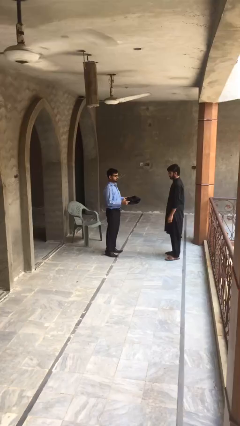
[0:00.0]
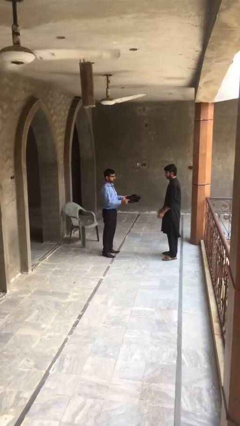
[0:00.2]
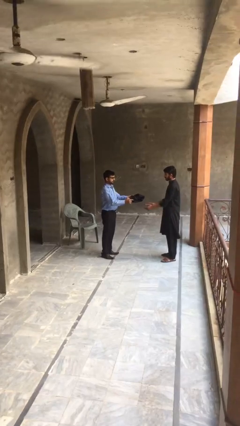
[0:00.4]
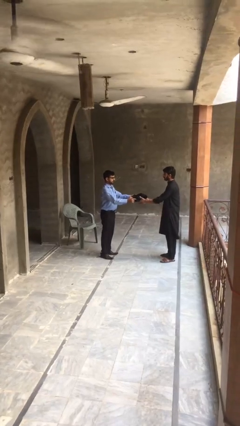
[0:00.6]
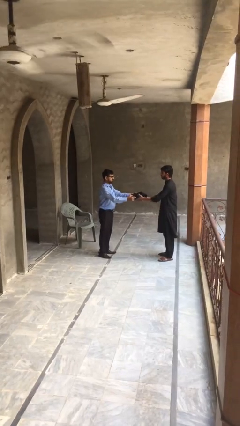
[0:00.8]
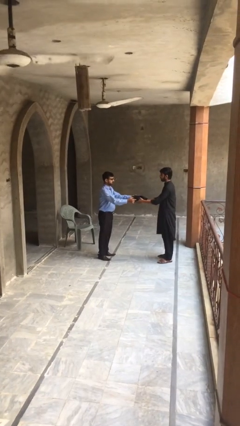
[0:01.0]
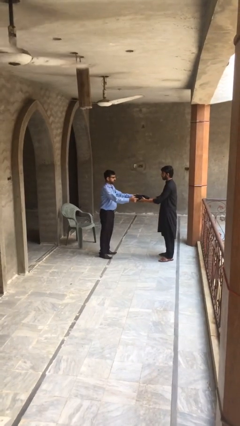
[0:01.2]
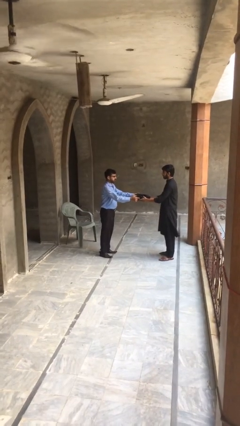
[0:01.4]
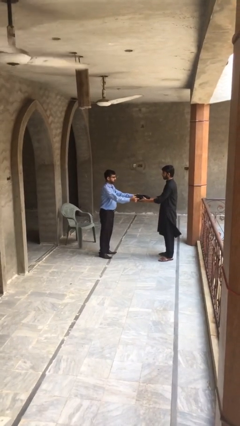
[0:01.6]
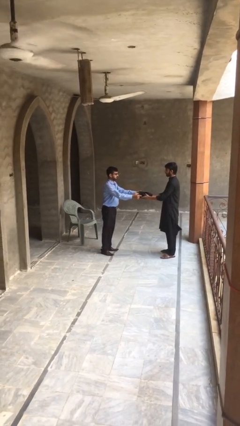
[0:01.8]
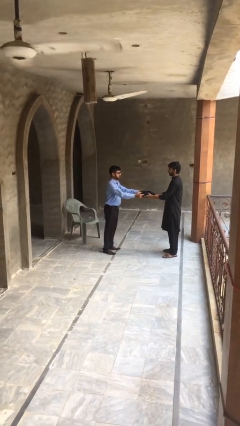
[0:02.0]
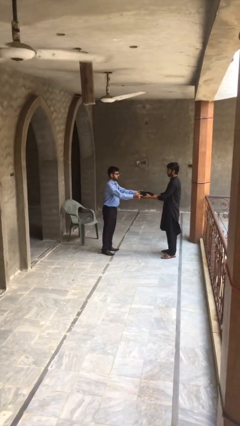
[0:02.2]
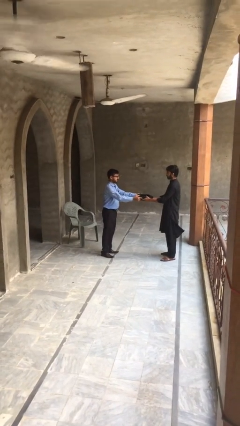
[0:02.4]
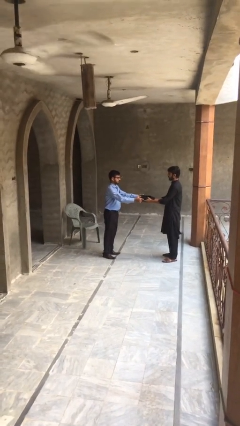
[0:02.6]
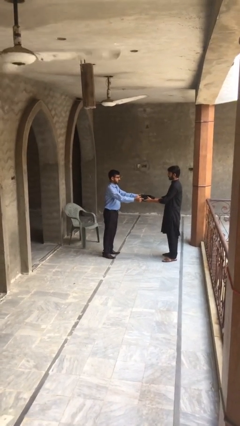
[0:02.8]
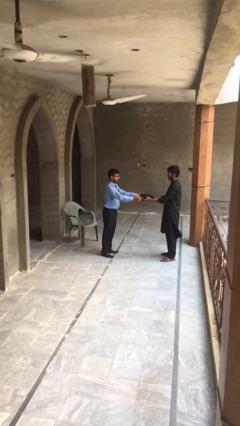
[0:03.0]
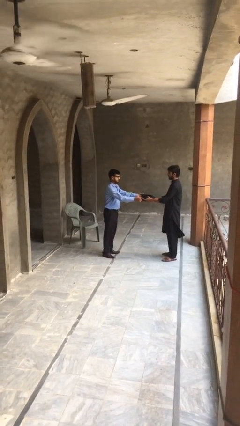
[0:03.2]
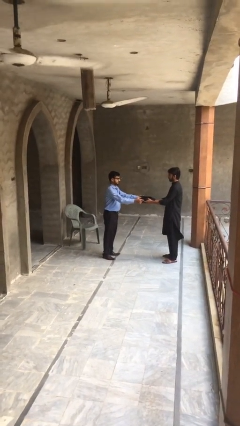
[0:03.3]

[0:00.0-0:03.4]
person transfers object to person

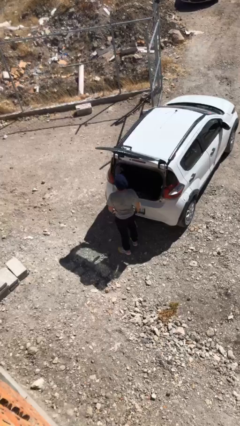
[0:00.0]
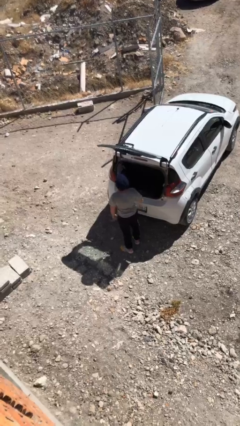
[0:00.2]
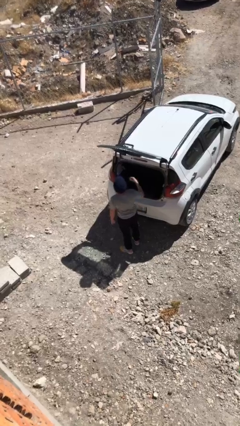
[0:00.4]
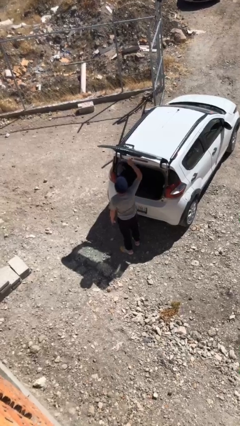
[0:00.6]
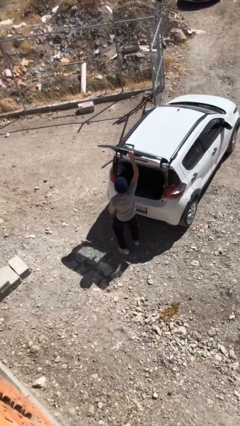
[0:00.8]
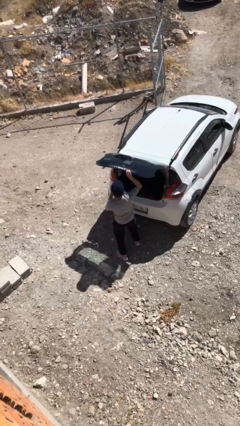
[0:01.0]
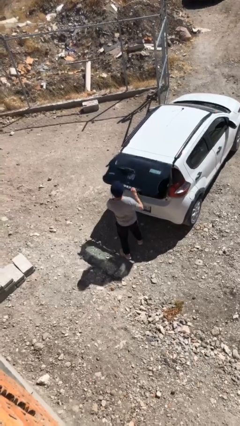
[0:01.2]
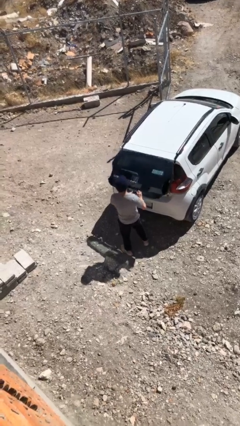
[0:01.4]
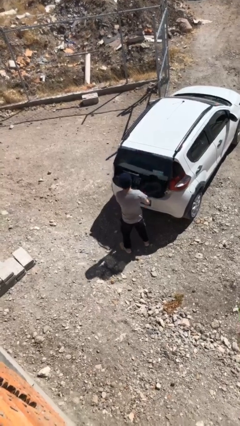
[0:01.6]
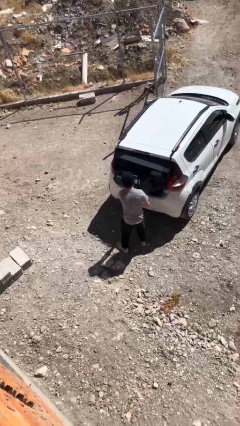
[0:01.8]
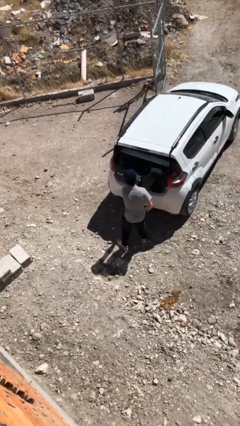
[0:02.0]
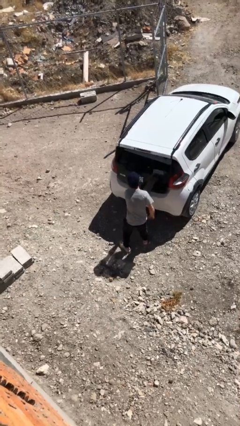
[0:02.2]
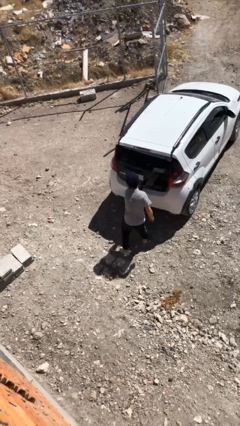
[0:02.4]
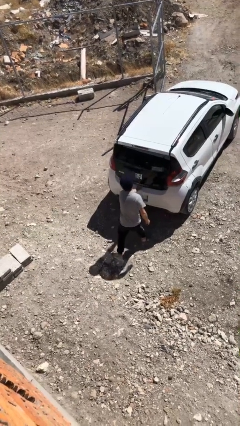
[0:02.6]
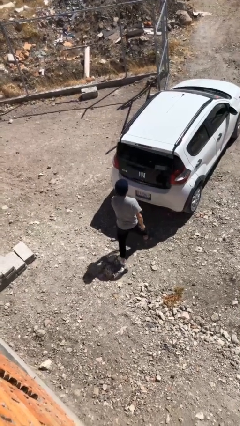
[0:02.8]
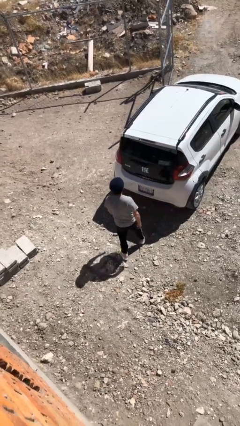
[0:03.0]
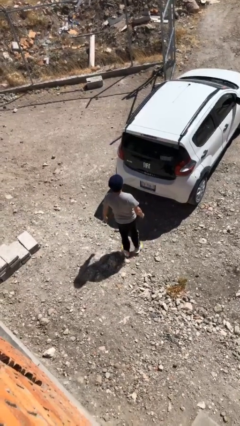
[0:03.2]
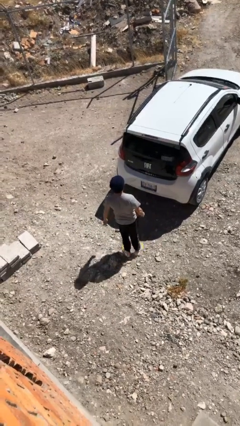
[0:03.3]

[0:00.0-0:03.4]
person closes car trunk

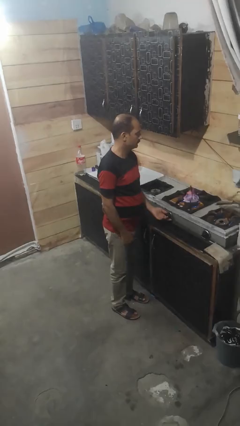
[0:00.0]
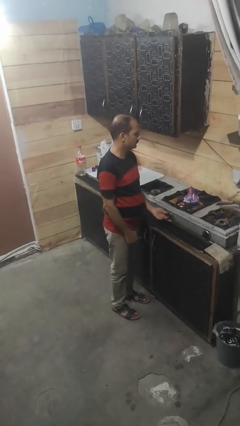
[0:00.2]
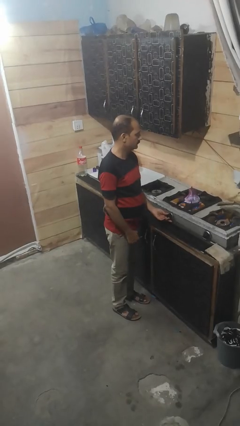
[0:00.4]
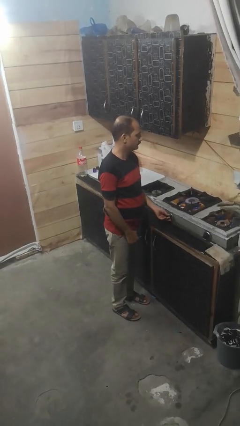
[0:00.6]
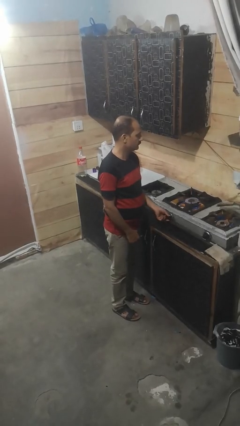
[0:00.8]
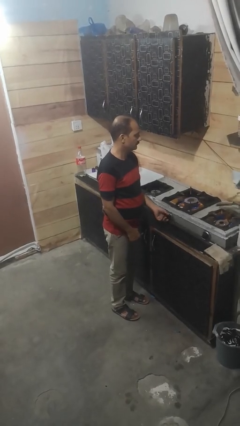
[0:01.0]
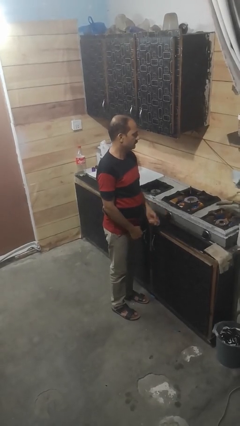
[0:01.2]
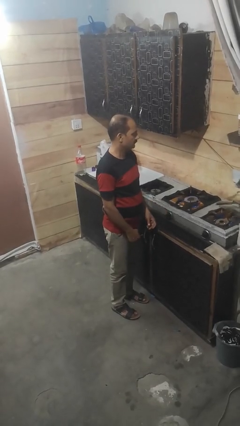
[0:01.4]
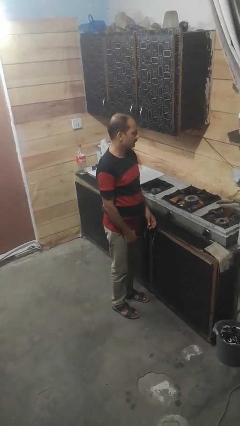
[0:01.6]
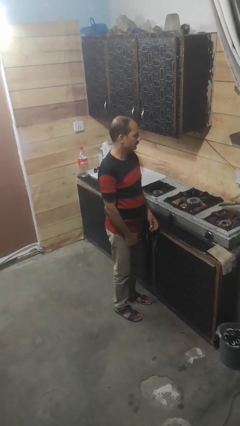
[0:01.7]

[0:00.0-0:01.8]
person turns off stovetop

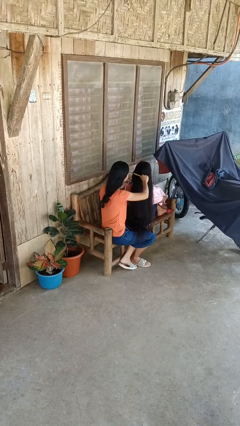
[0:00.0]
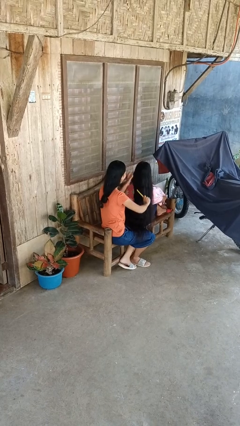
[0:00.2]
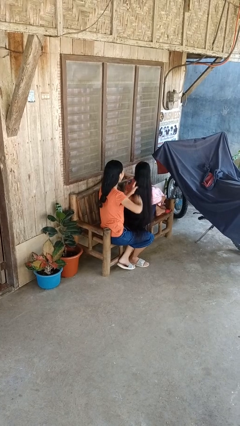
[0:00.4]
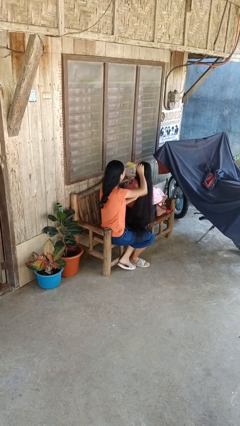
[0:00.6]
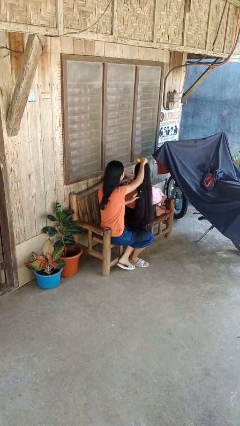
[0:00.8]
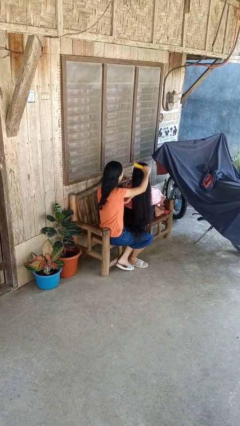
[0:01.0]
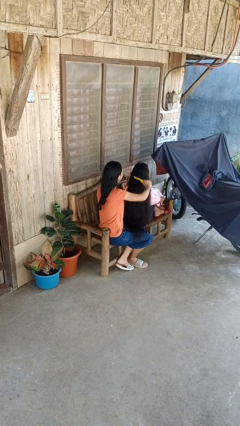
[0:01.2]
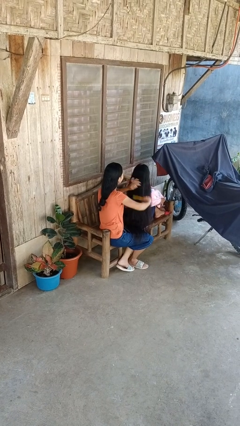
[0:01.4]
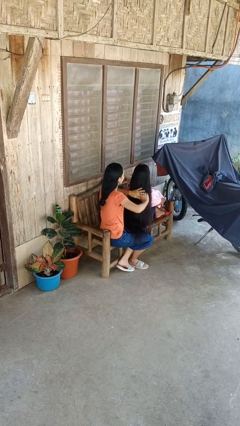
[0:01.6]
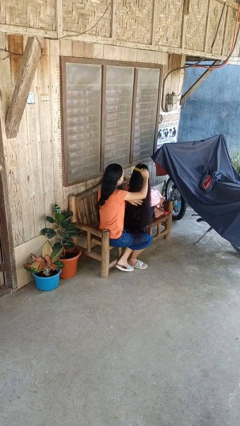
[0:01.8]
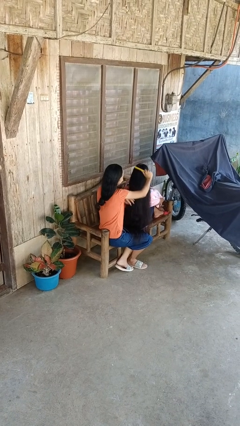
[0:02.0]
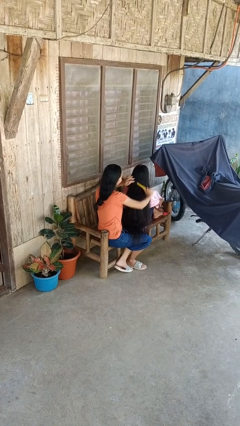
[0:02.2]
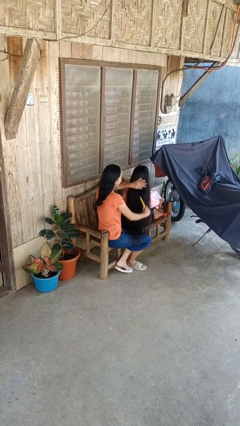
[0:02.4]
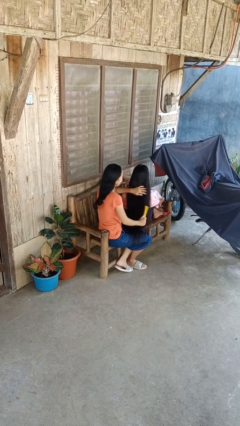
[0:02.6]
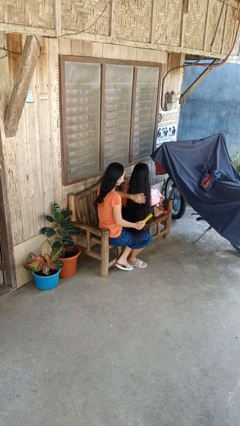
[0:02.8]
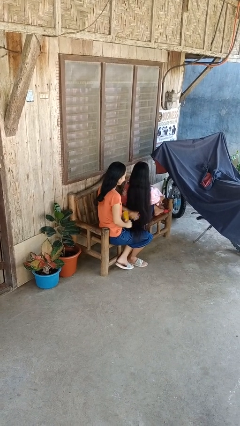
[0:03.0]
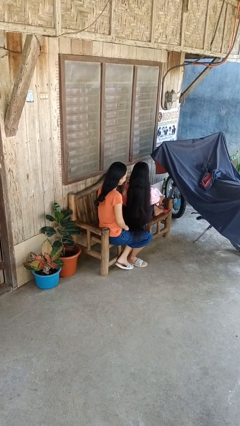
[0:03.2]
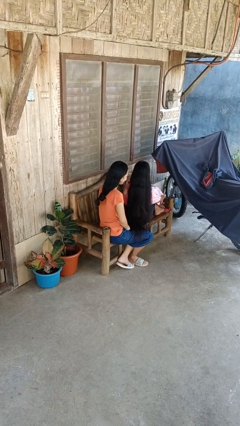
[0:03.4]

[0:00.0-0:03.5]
person brushes hair of person

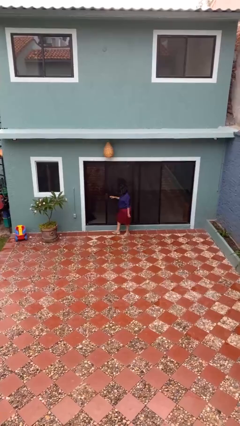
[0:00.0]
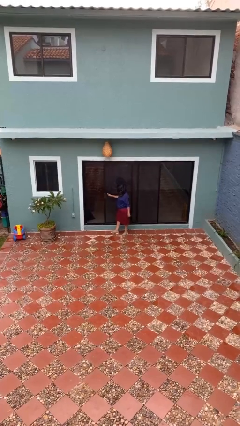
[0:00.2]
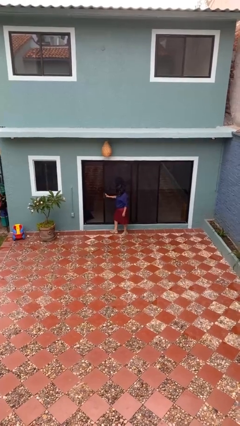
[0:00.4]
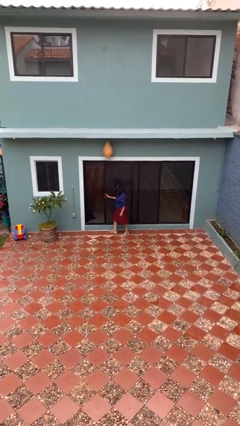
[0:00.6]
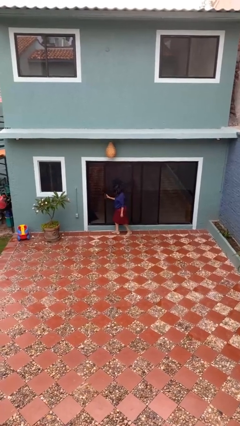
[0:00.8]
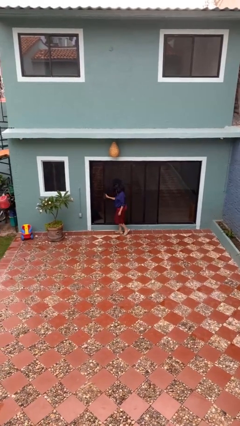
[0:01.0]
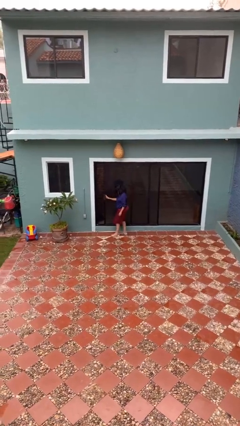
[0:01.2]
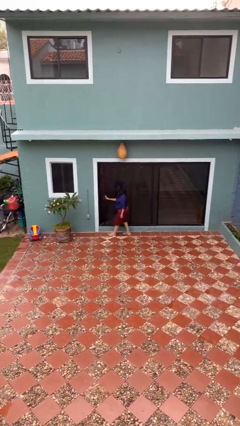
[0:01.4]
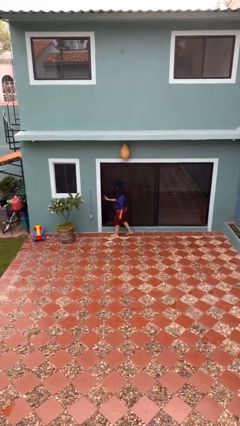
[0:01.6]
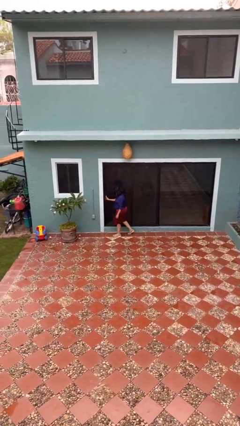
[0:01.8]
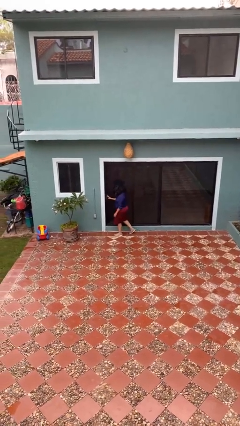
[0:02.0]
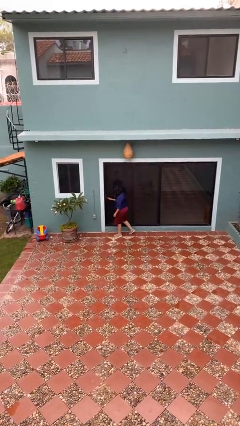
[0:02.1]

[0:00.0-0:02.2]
person closes sliding door

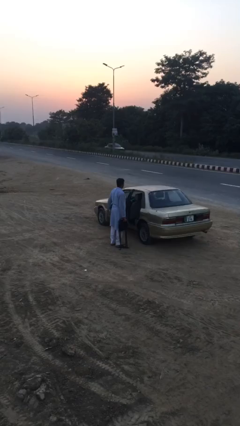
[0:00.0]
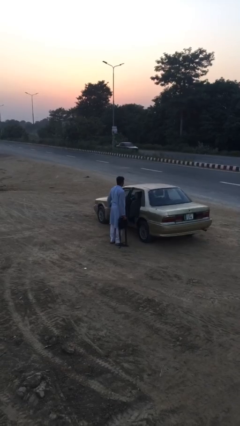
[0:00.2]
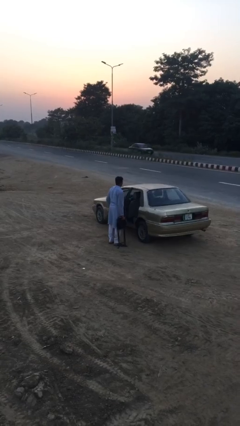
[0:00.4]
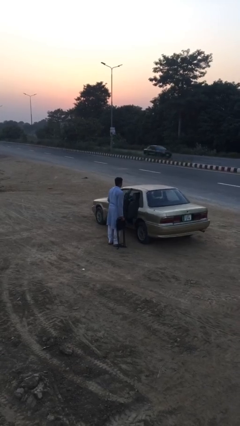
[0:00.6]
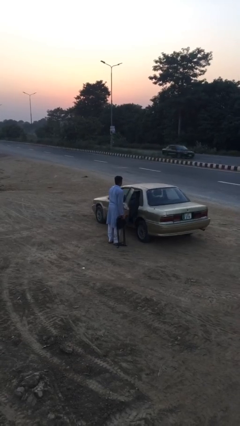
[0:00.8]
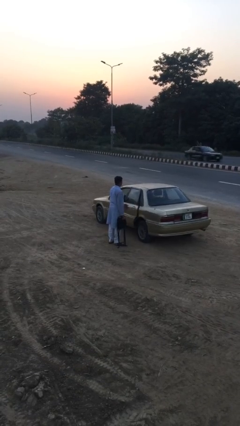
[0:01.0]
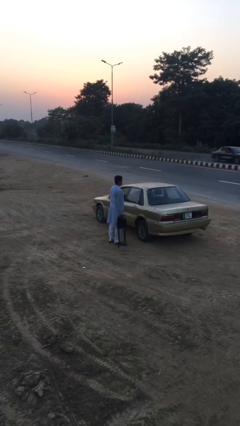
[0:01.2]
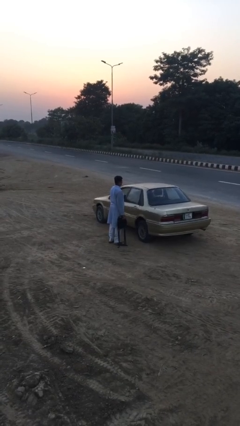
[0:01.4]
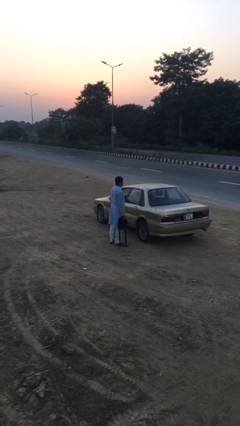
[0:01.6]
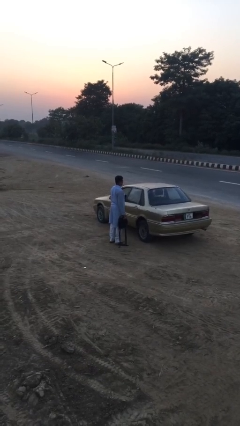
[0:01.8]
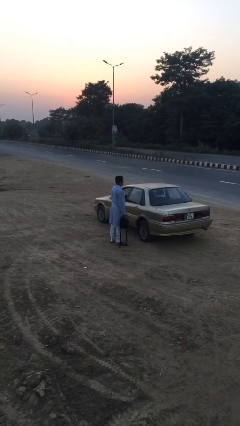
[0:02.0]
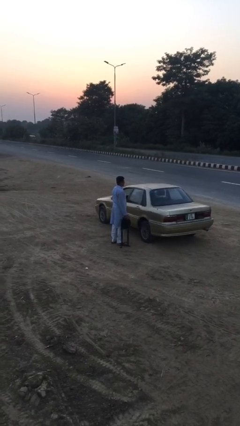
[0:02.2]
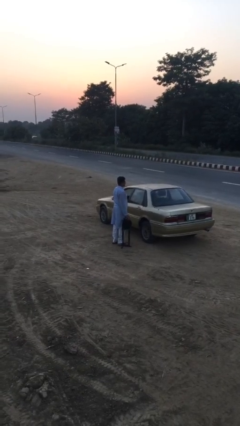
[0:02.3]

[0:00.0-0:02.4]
person closes car door

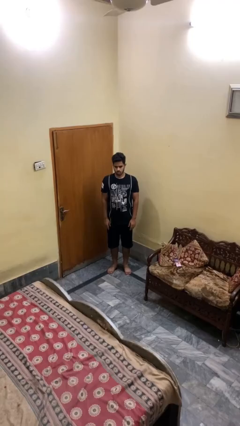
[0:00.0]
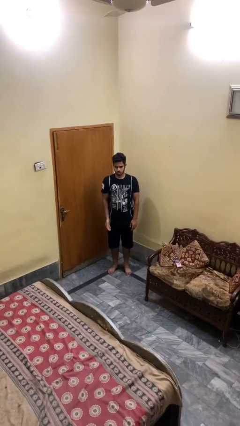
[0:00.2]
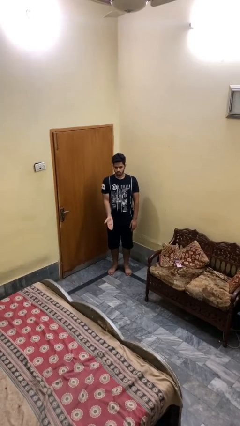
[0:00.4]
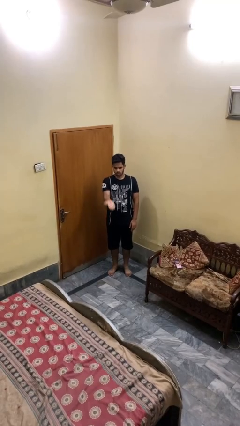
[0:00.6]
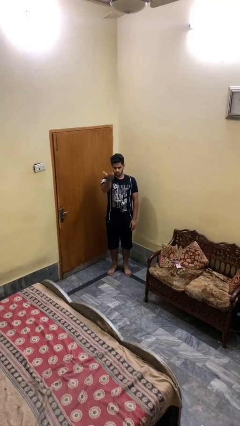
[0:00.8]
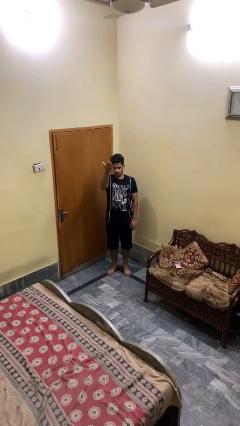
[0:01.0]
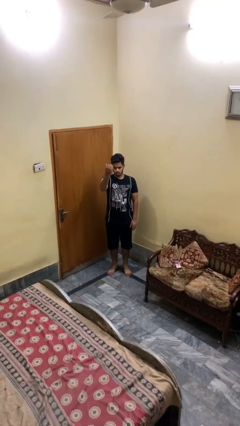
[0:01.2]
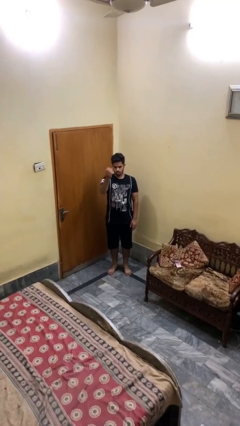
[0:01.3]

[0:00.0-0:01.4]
person gestures swipe up
